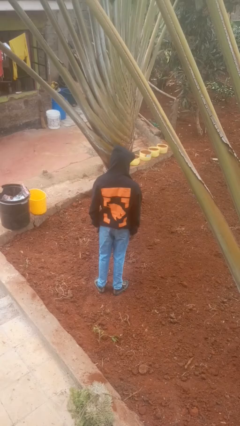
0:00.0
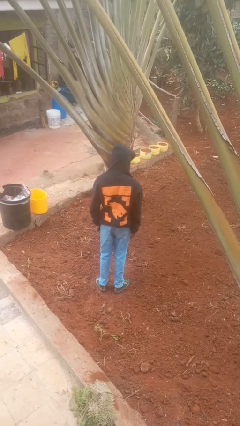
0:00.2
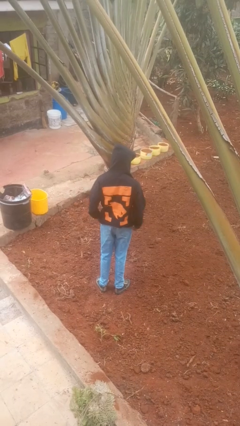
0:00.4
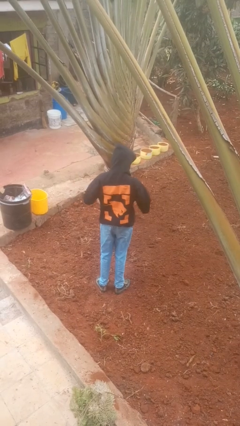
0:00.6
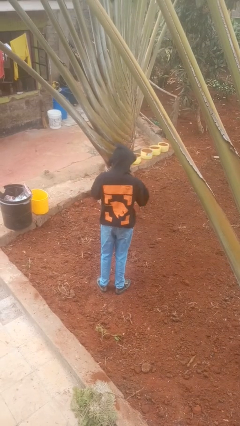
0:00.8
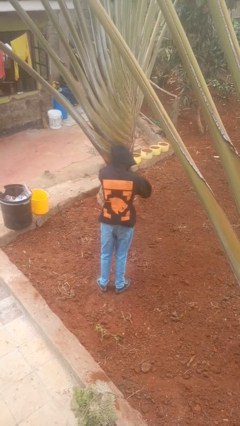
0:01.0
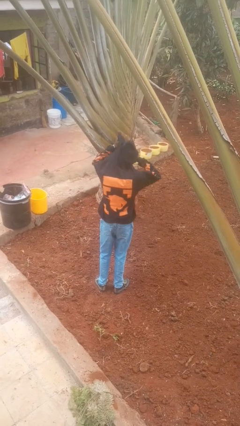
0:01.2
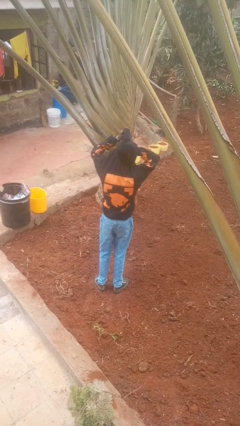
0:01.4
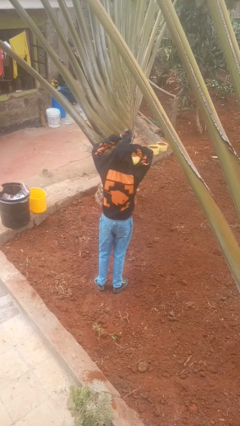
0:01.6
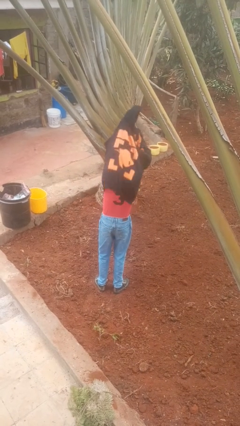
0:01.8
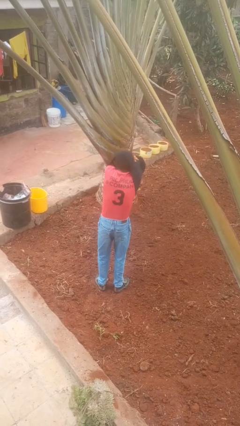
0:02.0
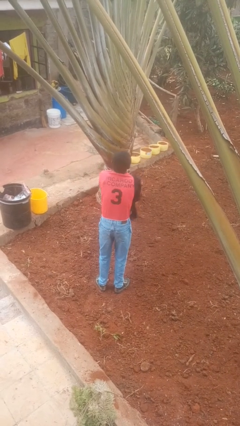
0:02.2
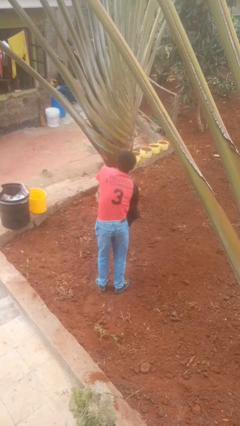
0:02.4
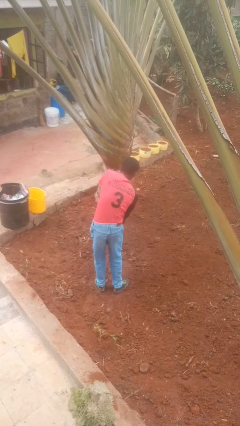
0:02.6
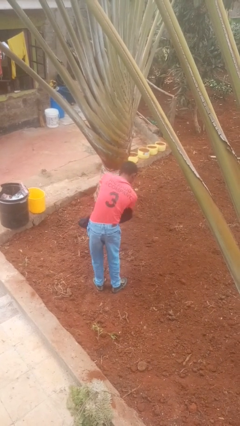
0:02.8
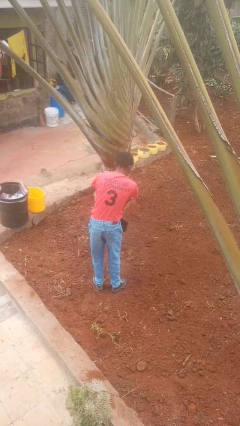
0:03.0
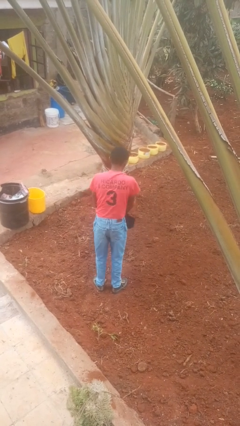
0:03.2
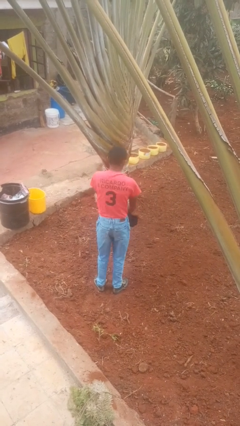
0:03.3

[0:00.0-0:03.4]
person takes off hoodie

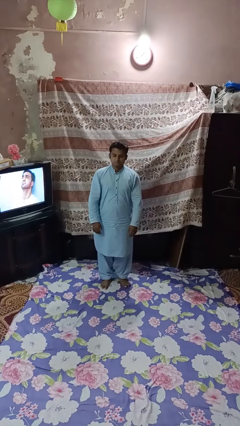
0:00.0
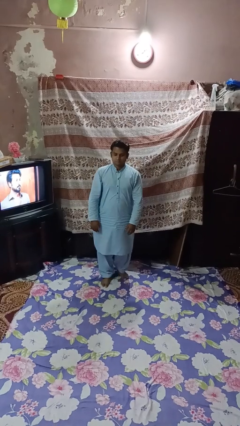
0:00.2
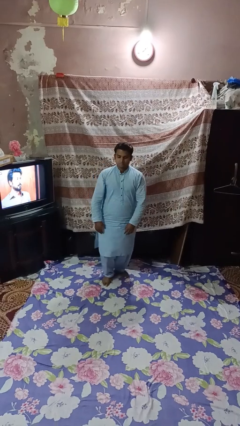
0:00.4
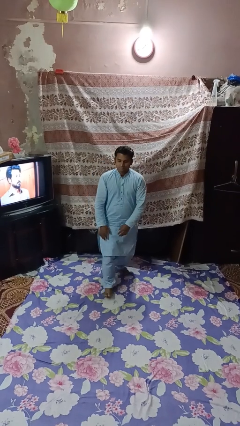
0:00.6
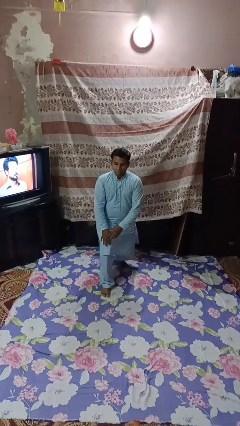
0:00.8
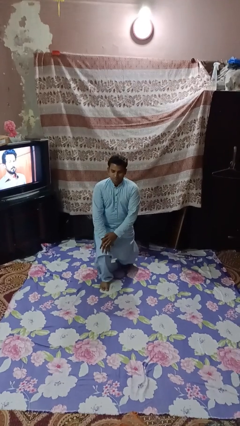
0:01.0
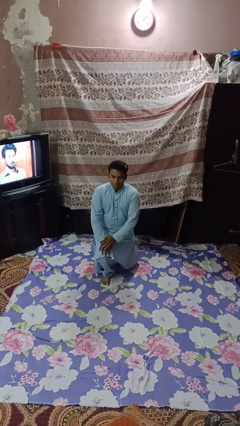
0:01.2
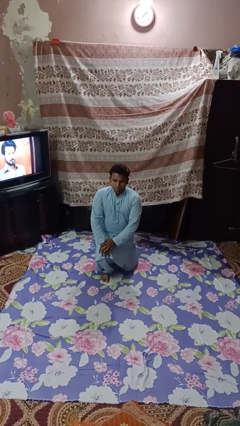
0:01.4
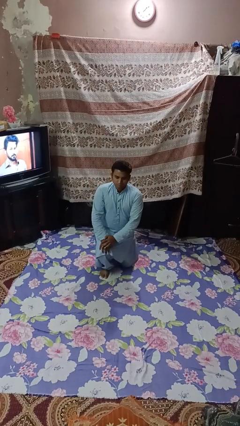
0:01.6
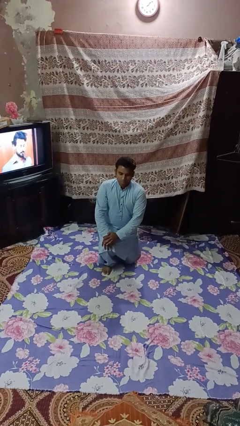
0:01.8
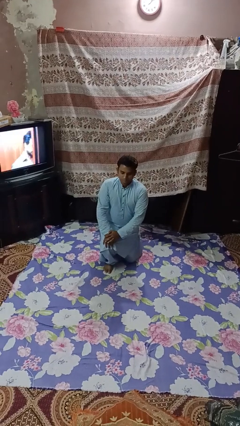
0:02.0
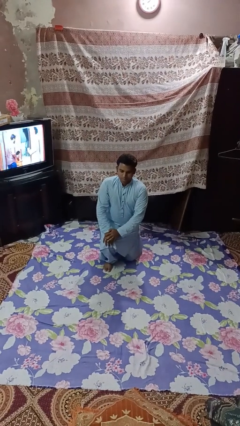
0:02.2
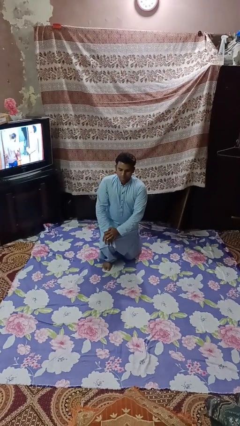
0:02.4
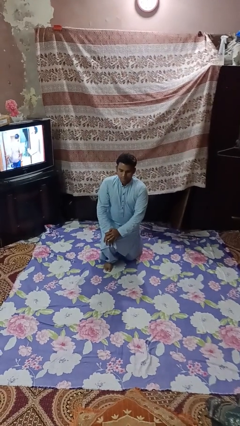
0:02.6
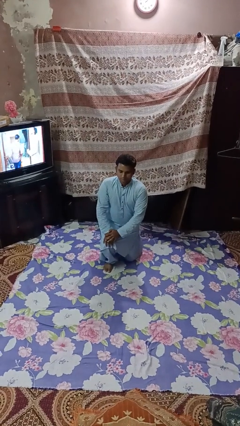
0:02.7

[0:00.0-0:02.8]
person exercises with lunges

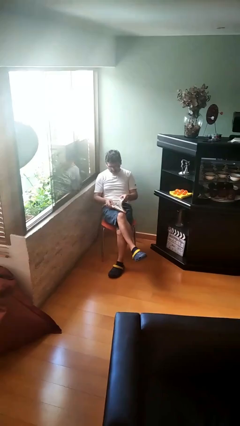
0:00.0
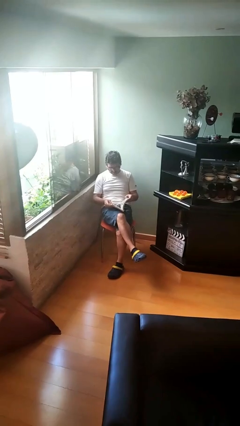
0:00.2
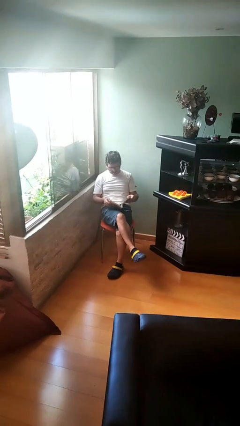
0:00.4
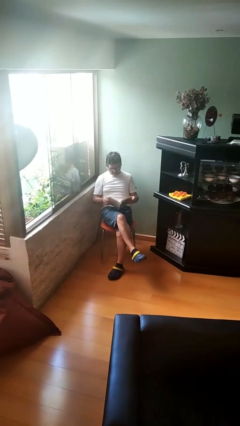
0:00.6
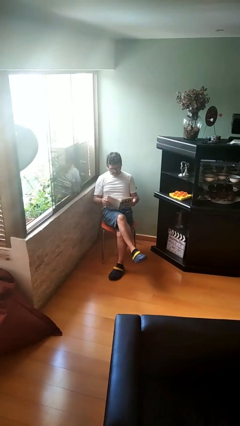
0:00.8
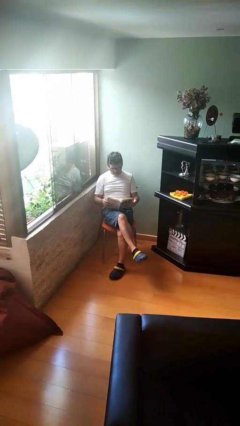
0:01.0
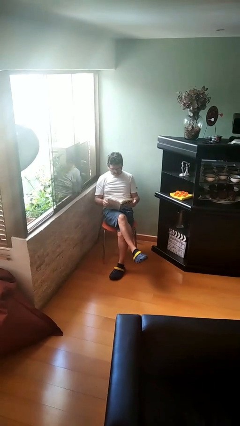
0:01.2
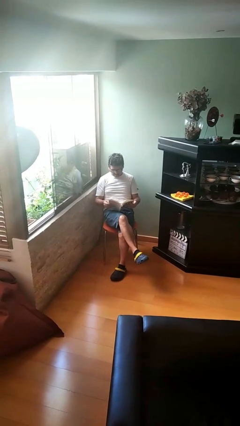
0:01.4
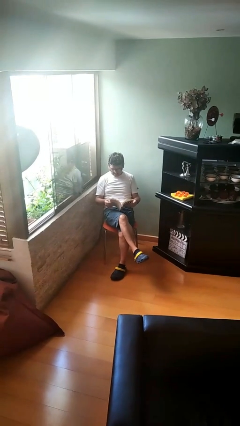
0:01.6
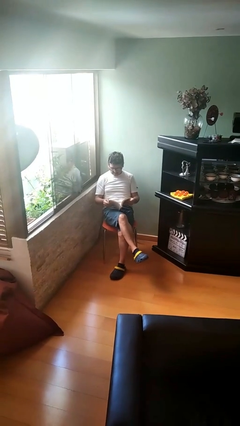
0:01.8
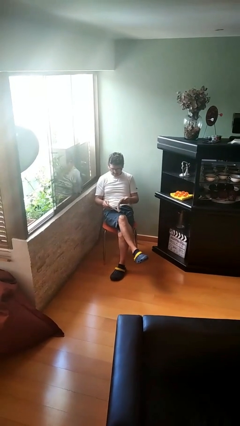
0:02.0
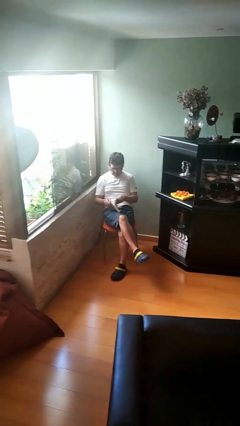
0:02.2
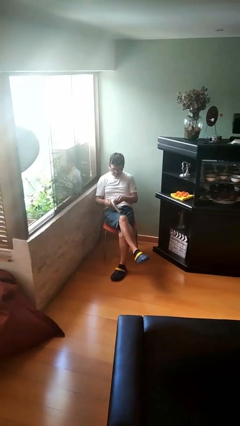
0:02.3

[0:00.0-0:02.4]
person reads document

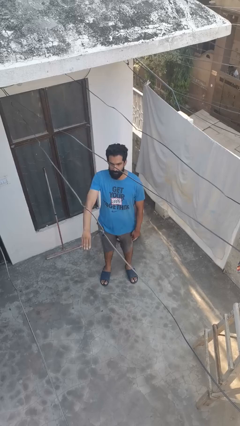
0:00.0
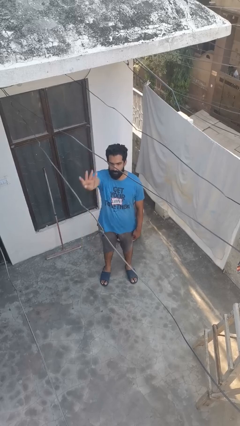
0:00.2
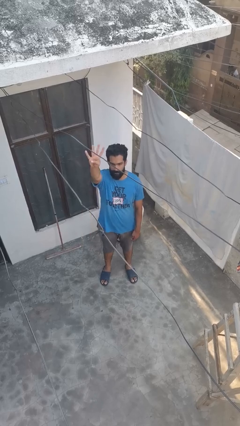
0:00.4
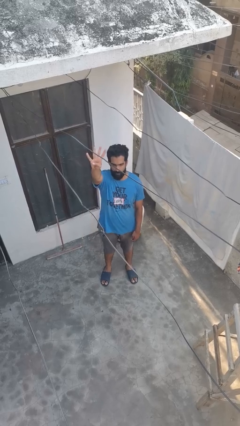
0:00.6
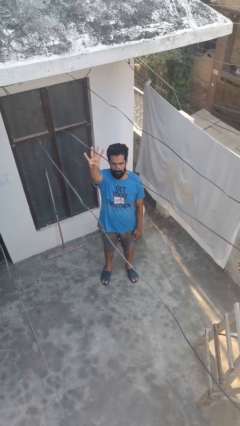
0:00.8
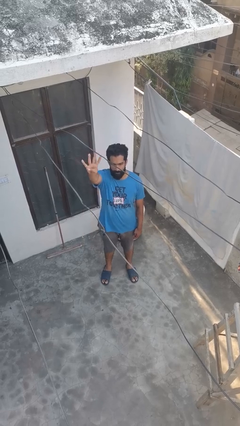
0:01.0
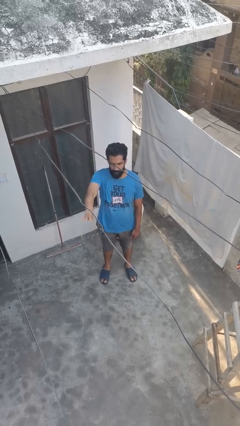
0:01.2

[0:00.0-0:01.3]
person gestures number four

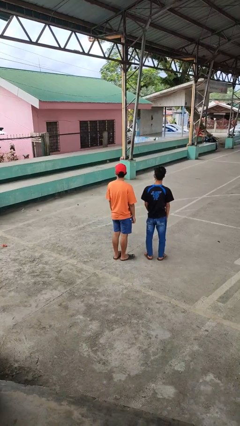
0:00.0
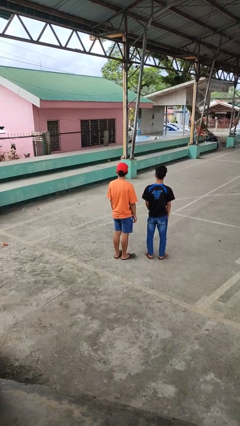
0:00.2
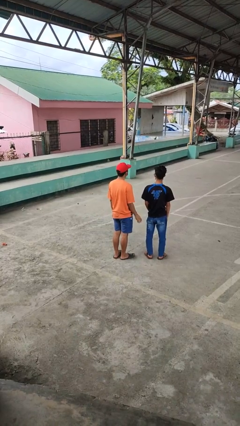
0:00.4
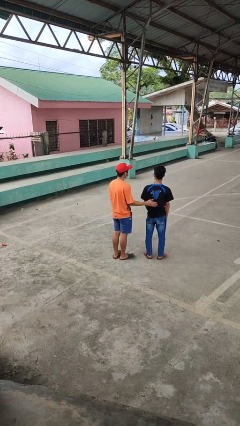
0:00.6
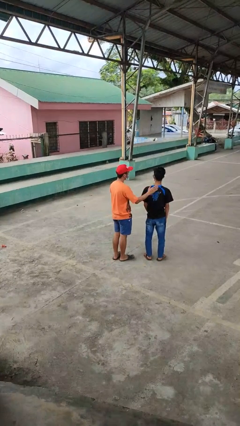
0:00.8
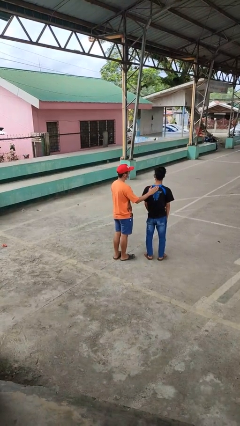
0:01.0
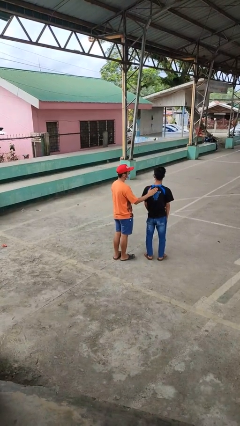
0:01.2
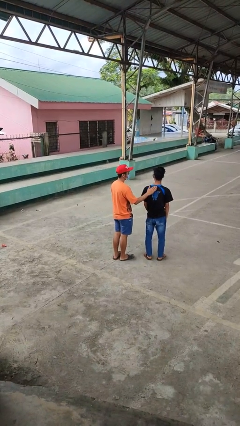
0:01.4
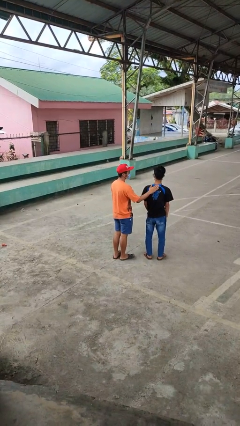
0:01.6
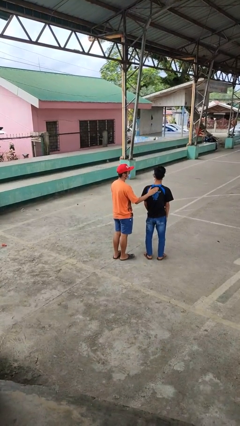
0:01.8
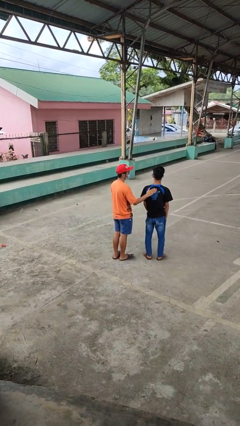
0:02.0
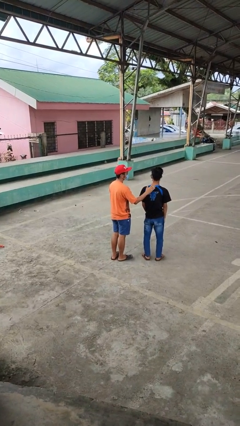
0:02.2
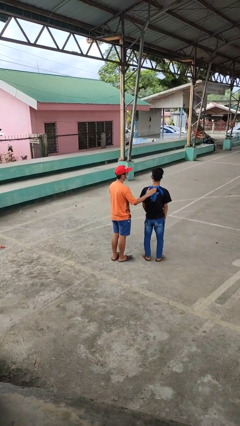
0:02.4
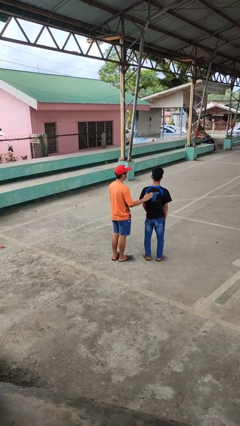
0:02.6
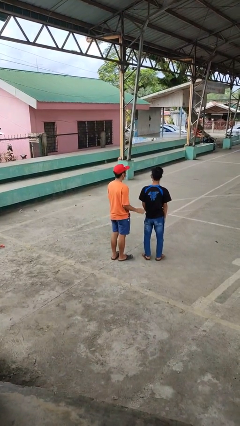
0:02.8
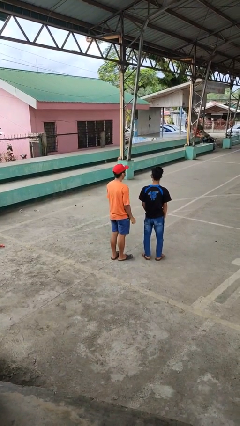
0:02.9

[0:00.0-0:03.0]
person touches back of person

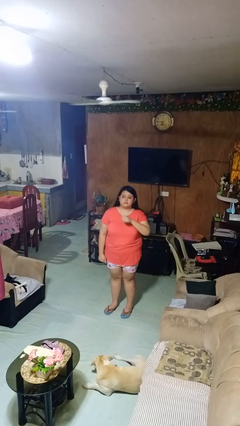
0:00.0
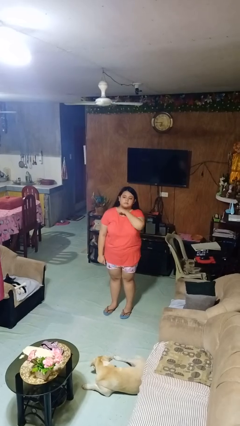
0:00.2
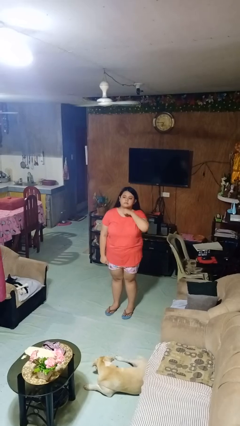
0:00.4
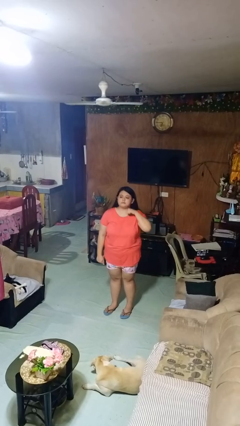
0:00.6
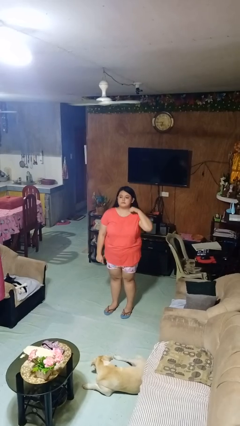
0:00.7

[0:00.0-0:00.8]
person gestures cut

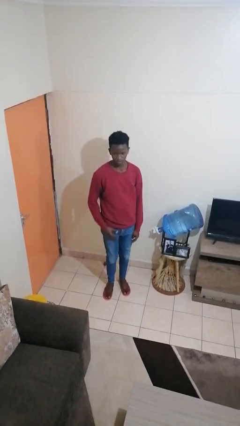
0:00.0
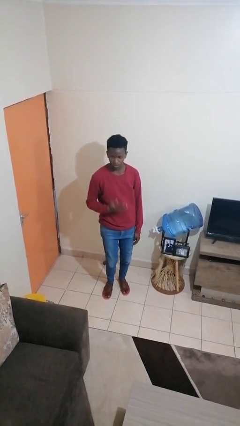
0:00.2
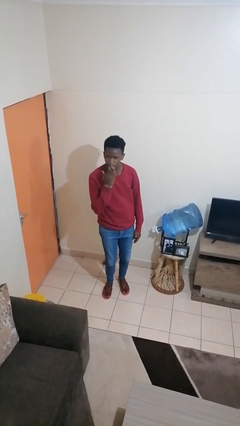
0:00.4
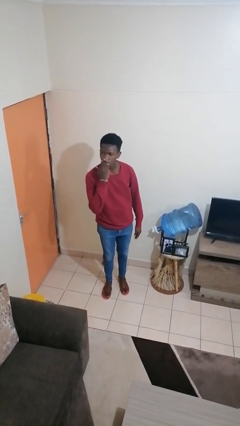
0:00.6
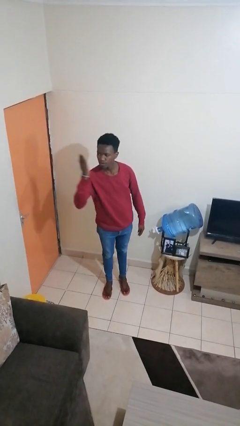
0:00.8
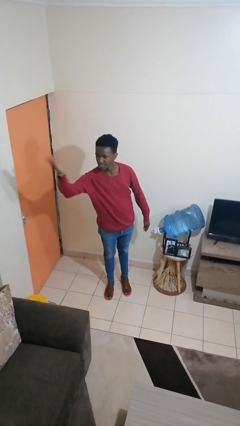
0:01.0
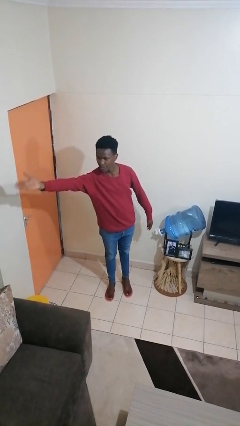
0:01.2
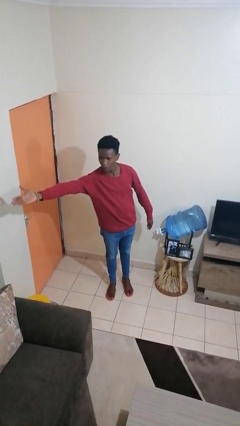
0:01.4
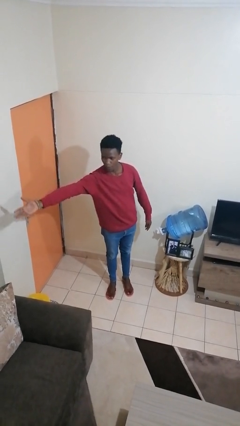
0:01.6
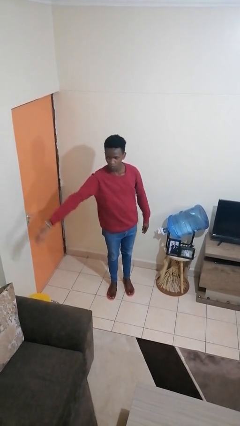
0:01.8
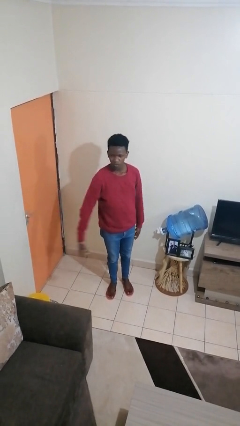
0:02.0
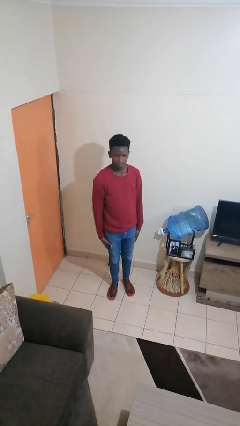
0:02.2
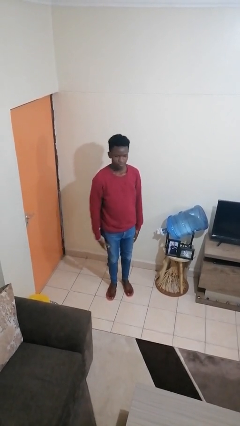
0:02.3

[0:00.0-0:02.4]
person gestures blow kiss

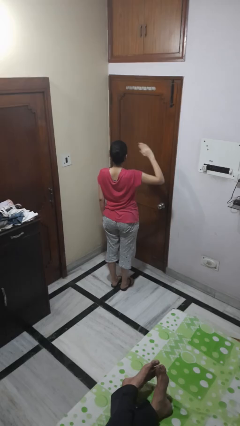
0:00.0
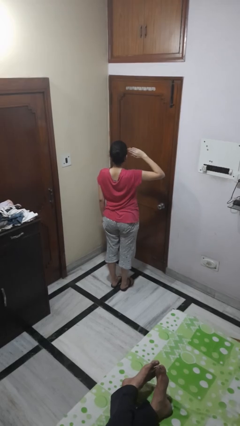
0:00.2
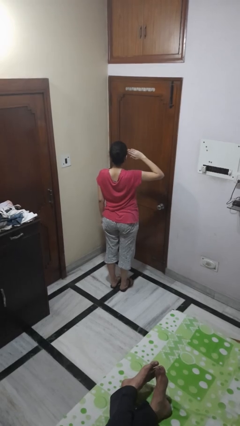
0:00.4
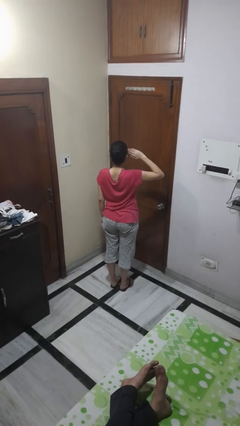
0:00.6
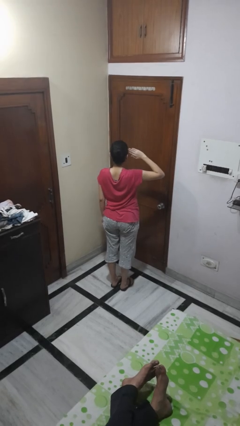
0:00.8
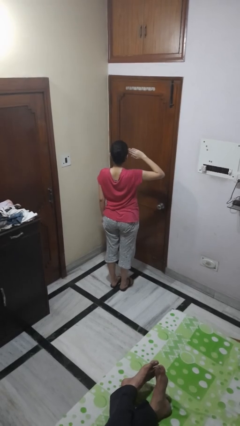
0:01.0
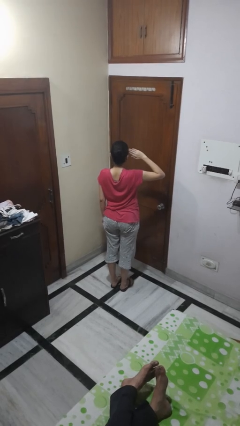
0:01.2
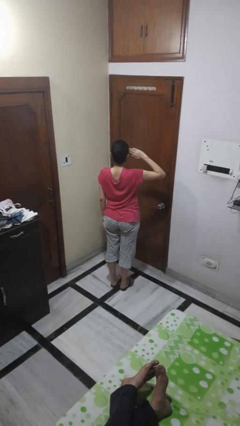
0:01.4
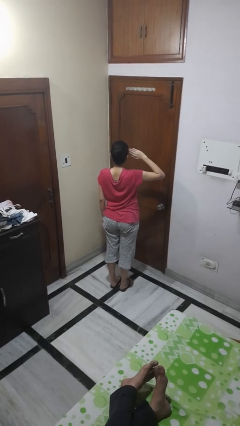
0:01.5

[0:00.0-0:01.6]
person salutes
